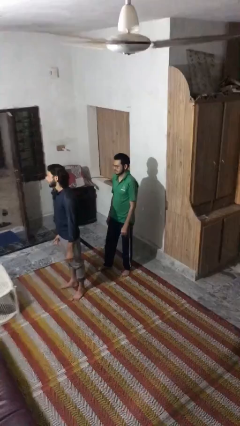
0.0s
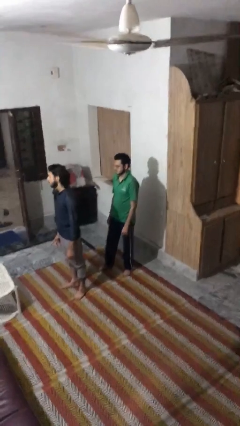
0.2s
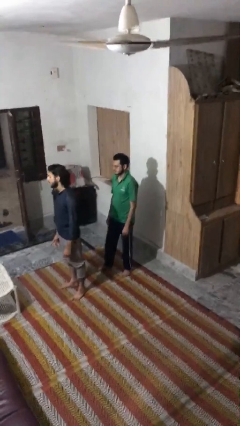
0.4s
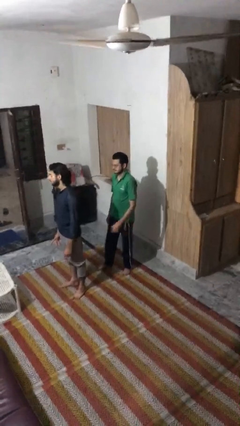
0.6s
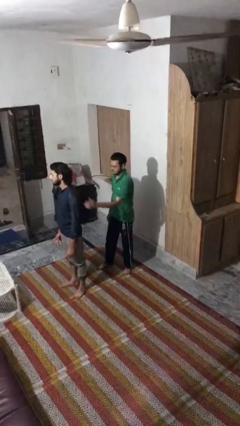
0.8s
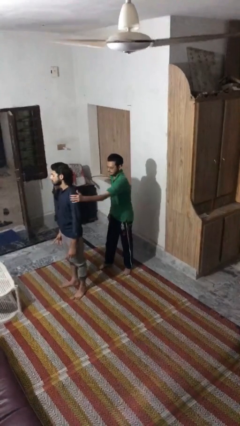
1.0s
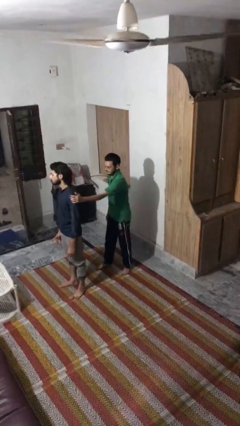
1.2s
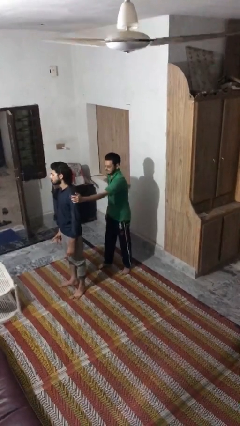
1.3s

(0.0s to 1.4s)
person grabs person by shoulder

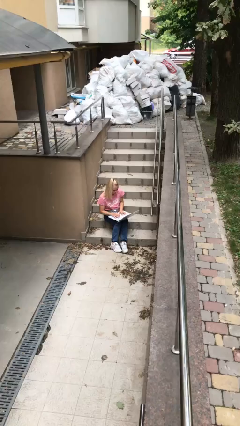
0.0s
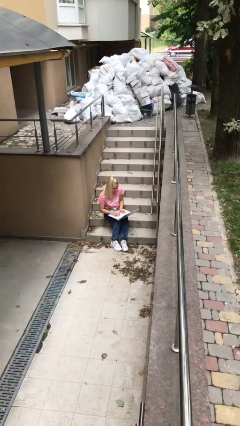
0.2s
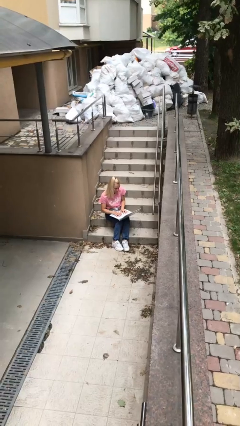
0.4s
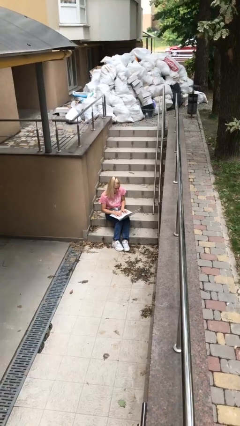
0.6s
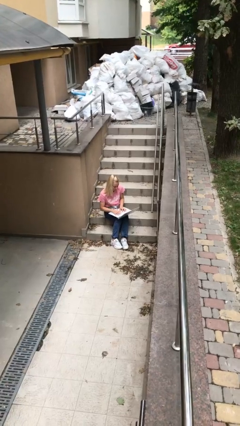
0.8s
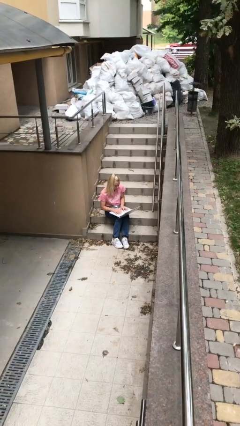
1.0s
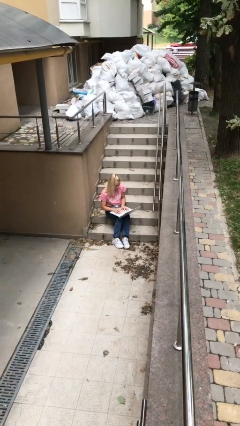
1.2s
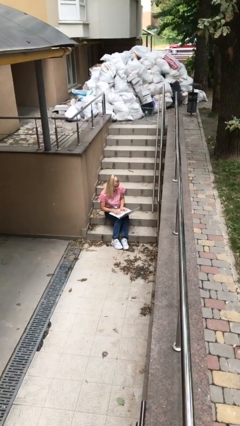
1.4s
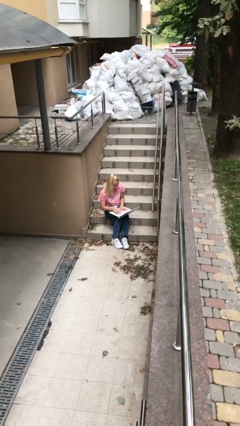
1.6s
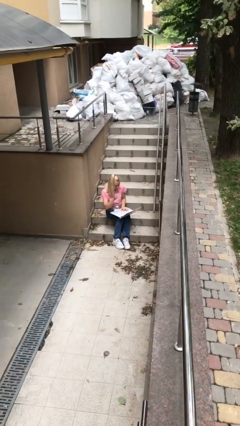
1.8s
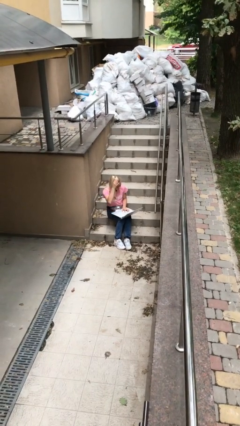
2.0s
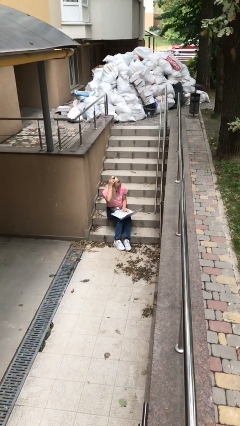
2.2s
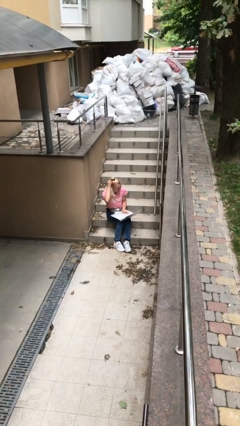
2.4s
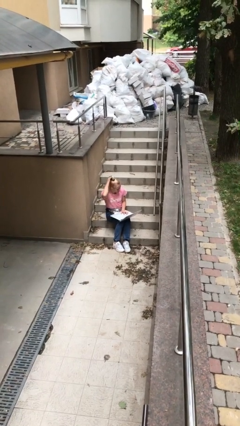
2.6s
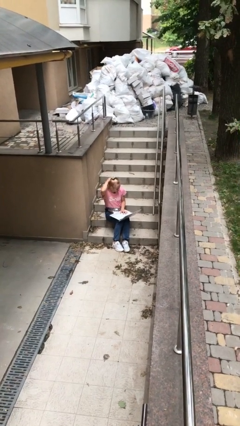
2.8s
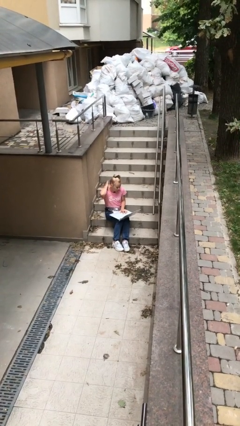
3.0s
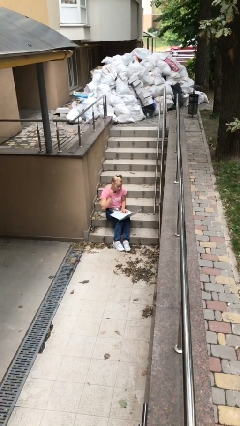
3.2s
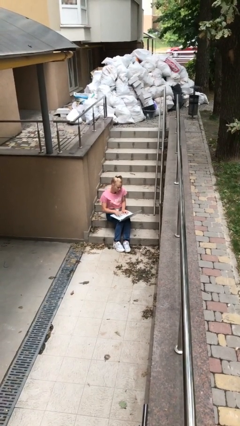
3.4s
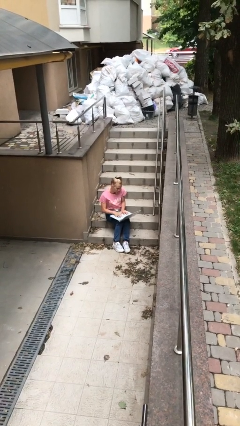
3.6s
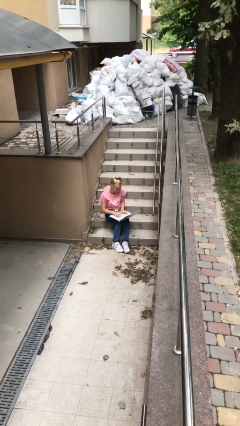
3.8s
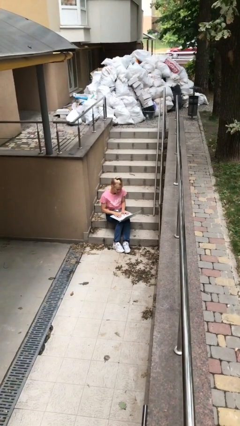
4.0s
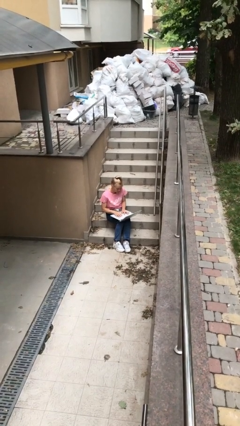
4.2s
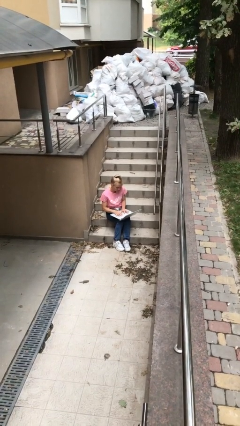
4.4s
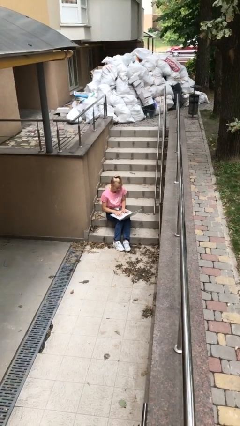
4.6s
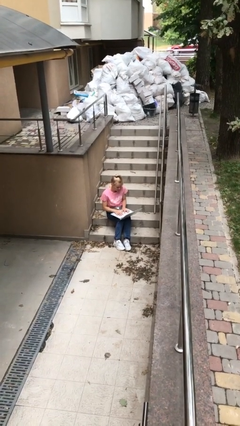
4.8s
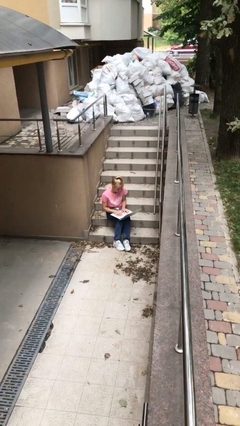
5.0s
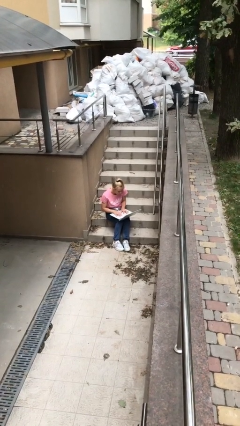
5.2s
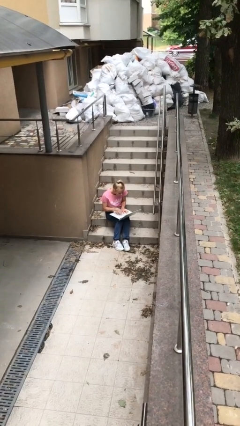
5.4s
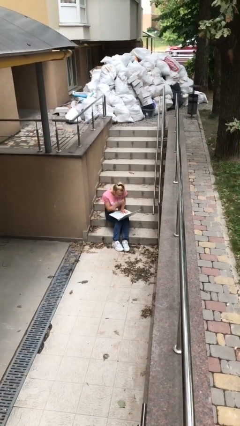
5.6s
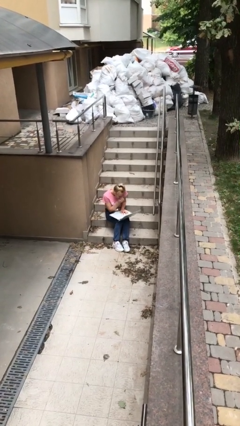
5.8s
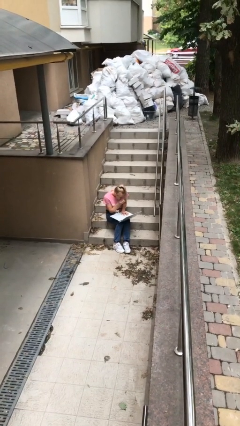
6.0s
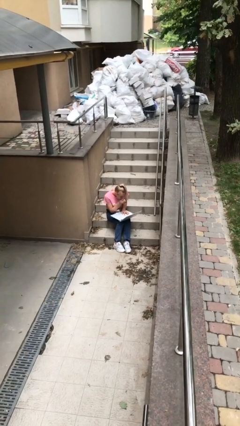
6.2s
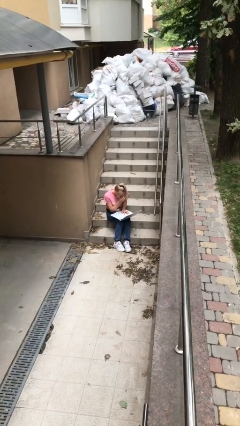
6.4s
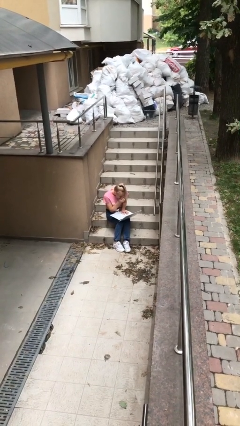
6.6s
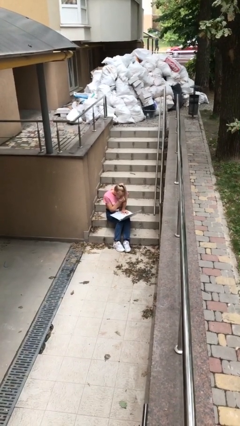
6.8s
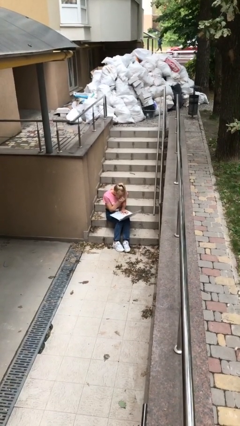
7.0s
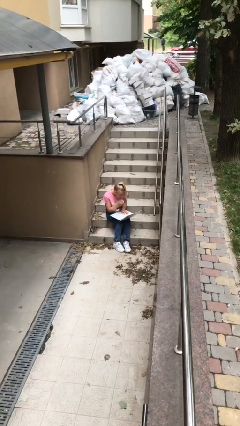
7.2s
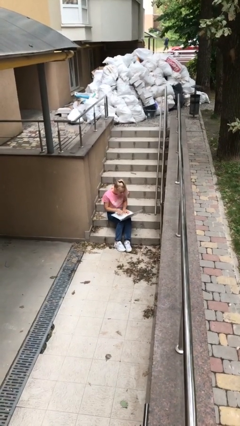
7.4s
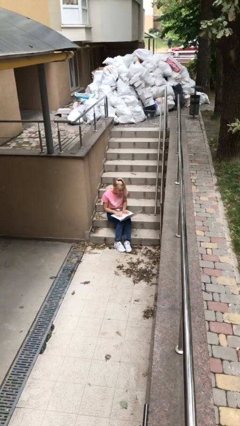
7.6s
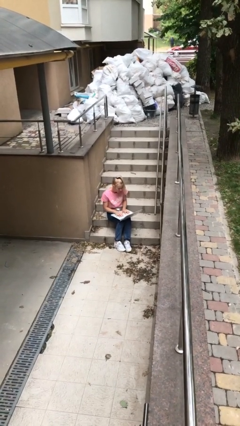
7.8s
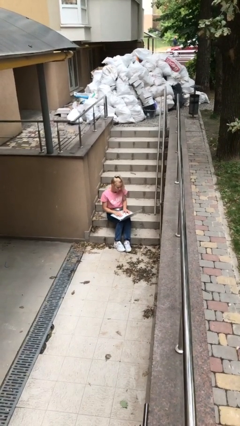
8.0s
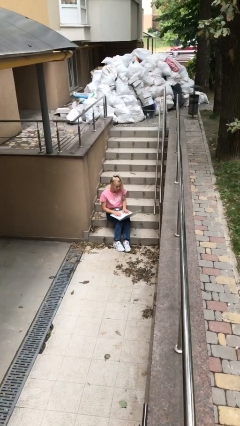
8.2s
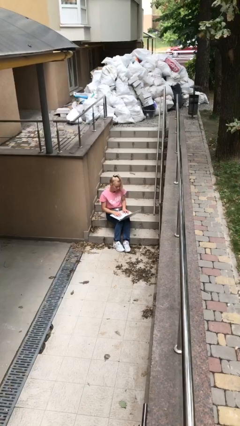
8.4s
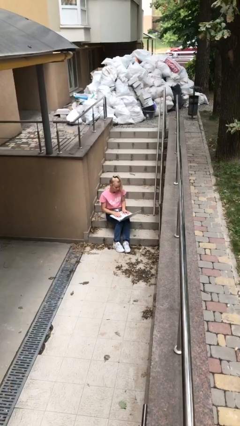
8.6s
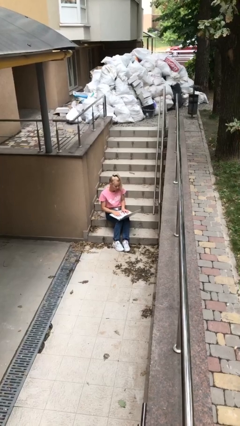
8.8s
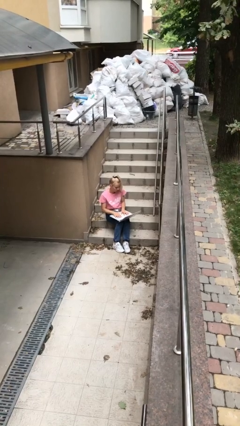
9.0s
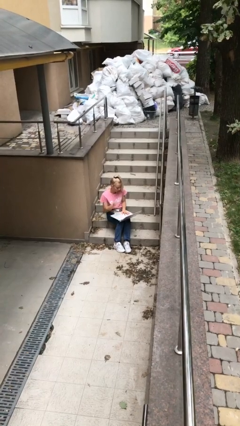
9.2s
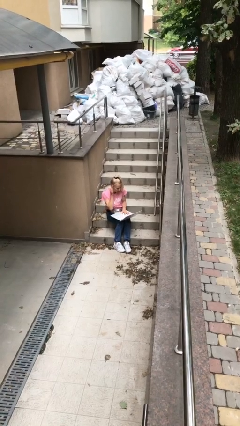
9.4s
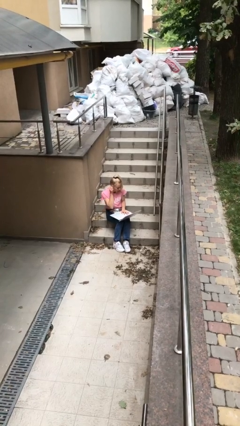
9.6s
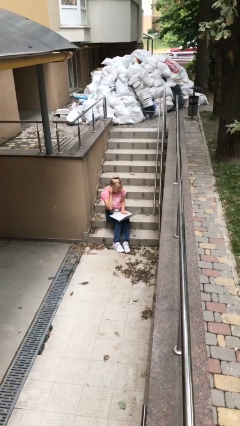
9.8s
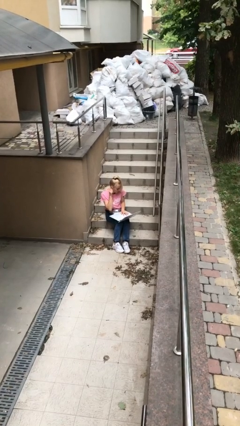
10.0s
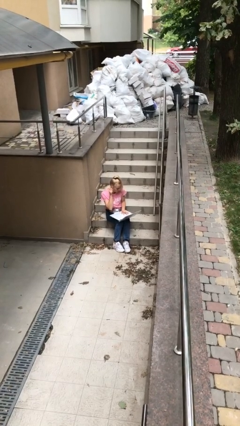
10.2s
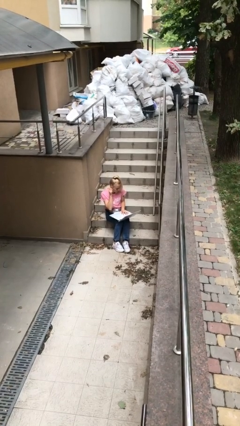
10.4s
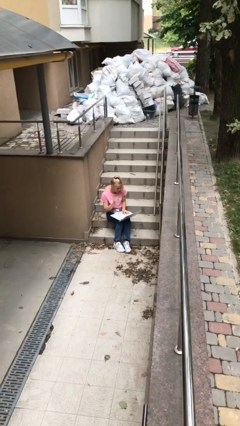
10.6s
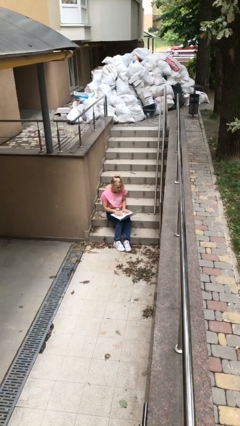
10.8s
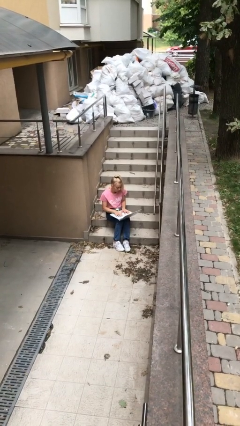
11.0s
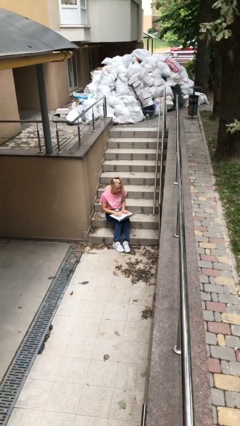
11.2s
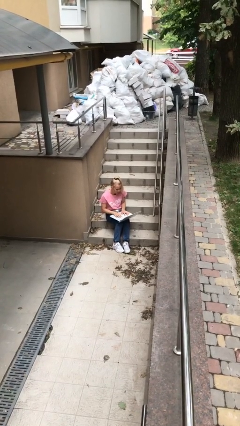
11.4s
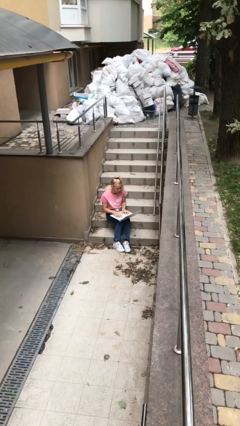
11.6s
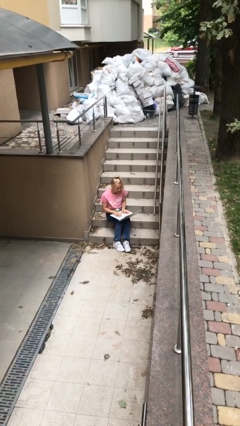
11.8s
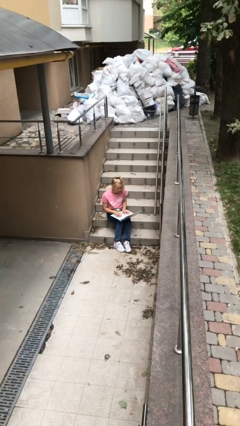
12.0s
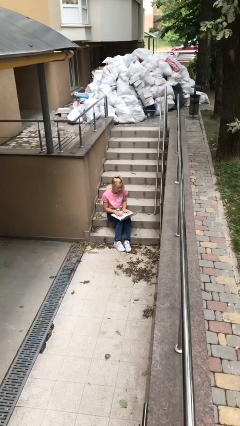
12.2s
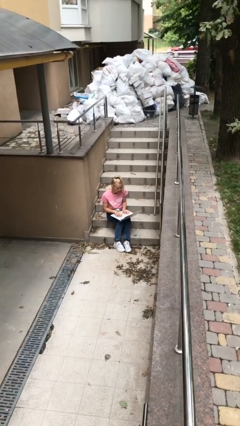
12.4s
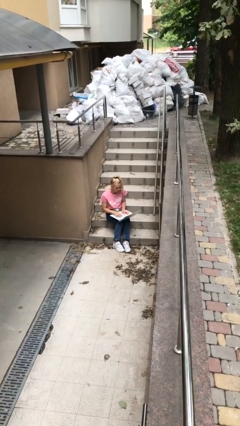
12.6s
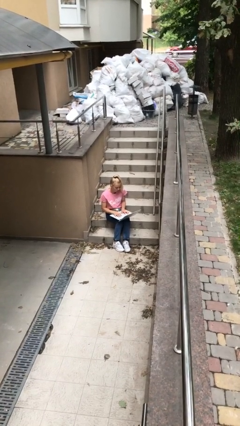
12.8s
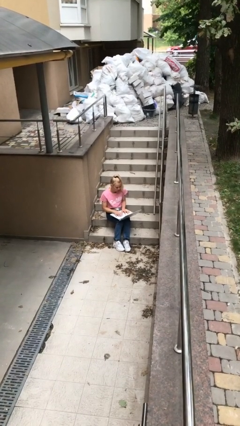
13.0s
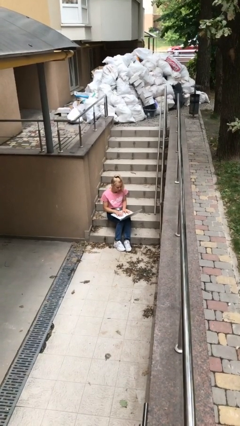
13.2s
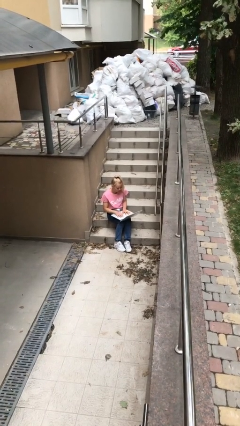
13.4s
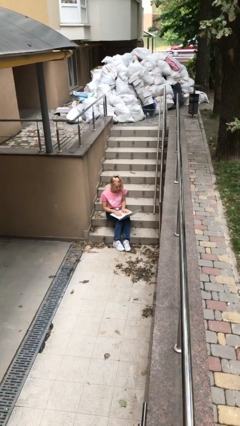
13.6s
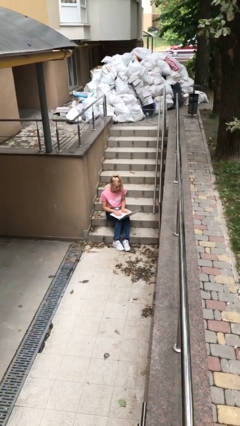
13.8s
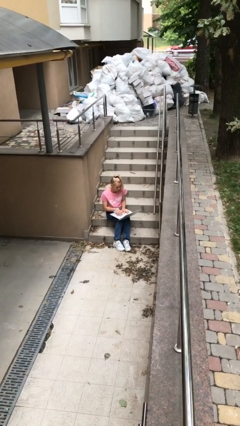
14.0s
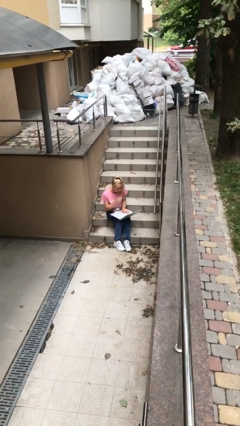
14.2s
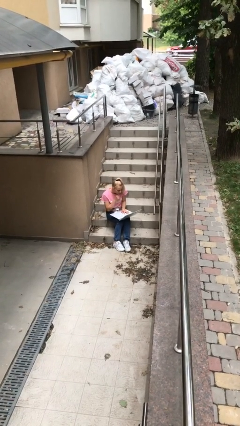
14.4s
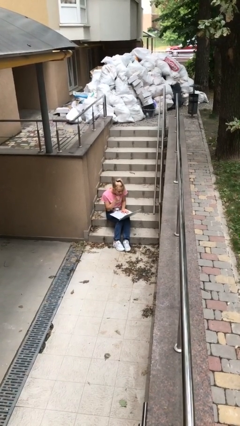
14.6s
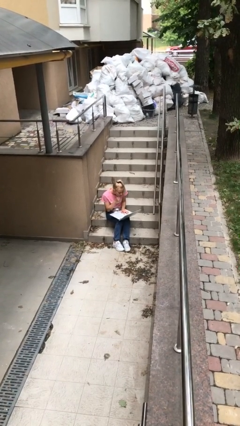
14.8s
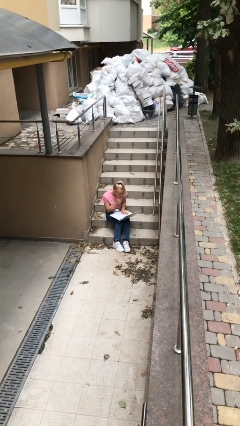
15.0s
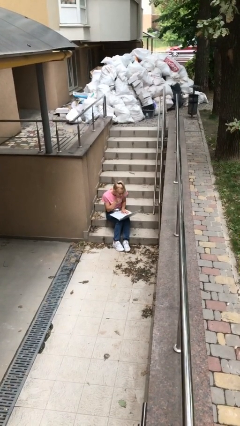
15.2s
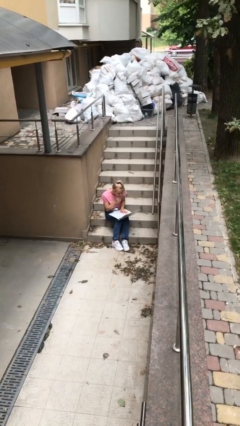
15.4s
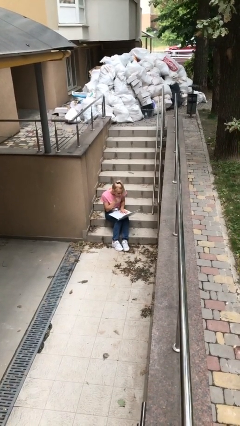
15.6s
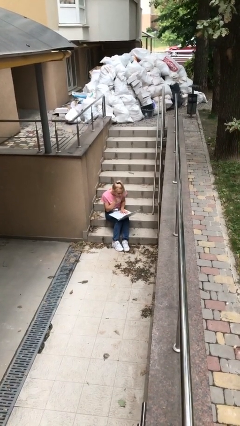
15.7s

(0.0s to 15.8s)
person interacts with laptop

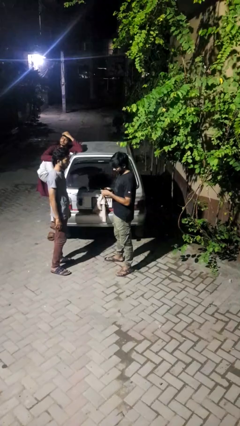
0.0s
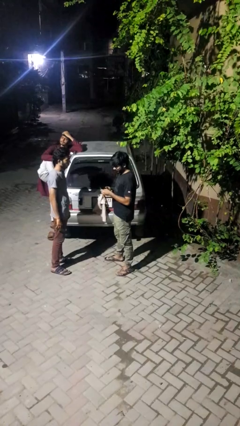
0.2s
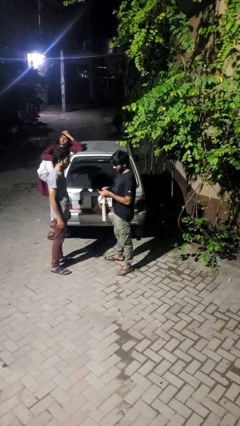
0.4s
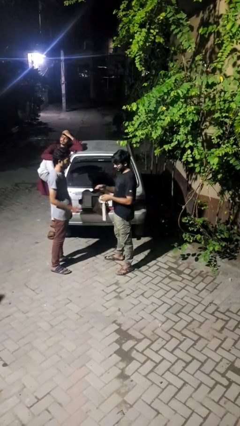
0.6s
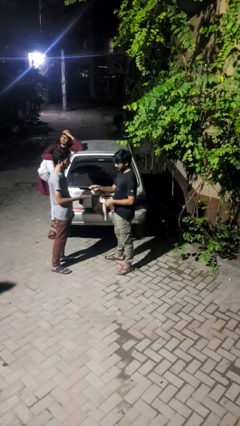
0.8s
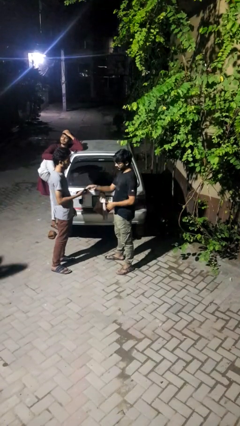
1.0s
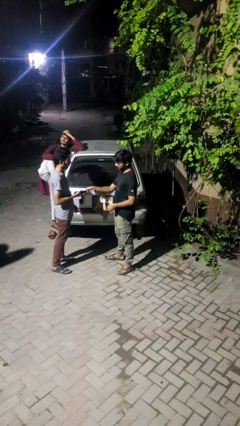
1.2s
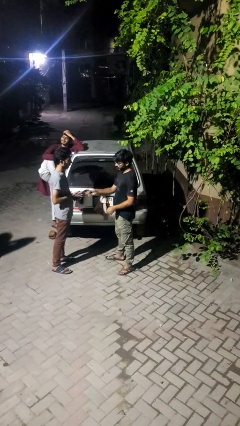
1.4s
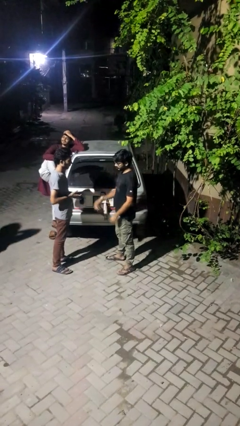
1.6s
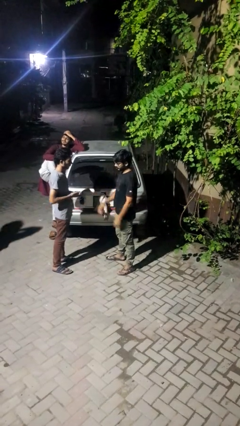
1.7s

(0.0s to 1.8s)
person transfers object to person
